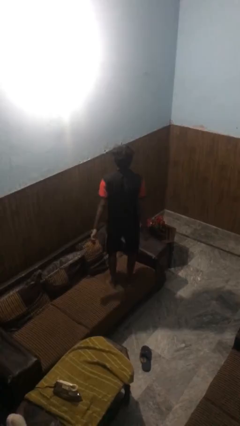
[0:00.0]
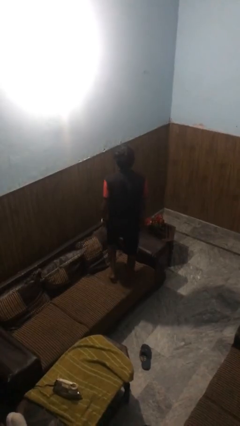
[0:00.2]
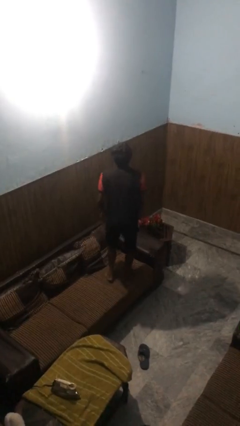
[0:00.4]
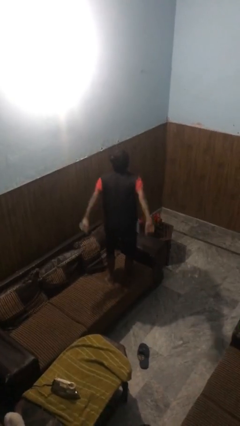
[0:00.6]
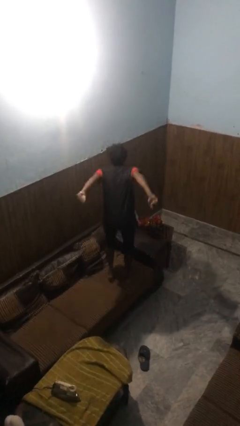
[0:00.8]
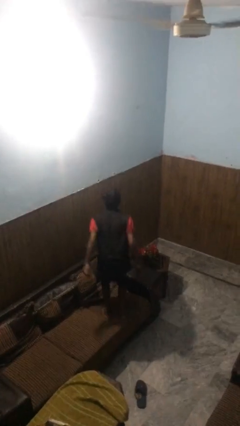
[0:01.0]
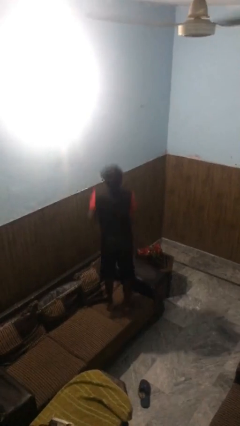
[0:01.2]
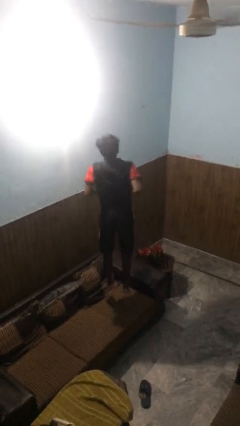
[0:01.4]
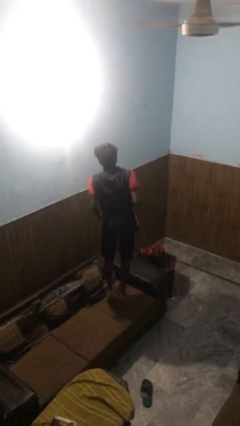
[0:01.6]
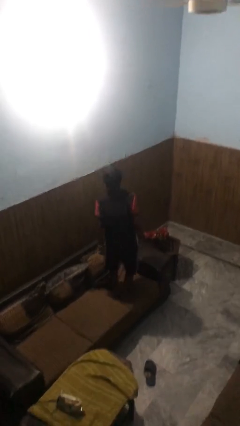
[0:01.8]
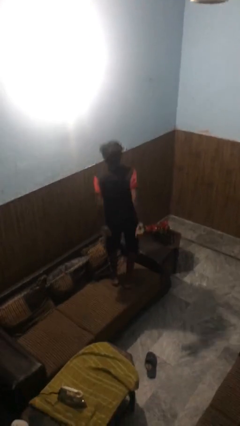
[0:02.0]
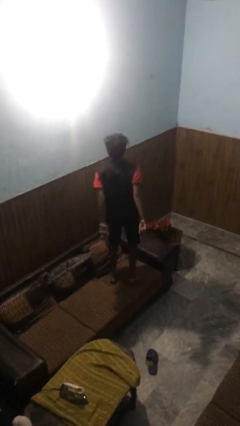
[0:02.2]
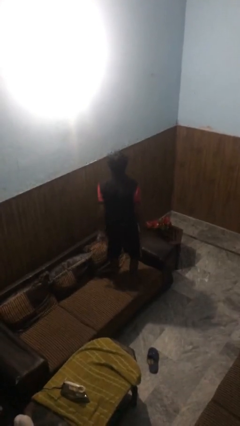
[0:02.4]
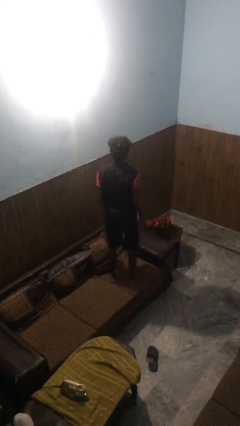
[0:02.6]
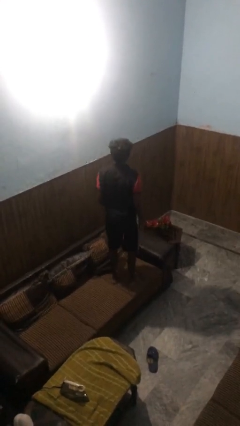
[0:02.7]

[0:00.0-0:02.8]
person jumps on couch

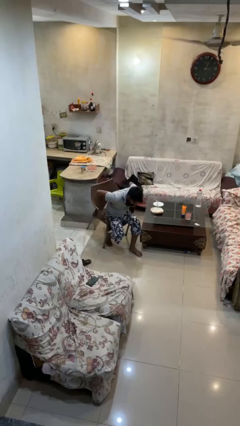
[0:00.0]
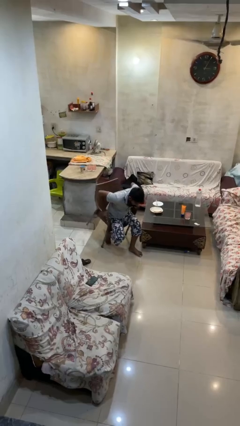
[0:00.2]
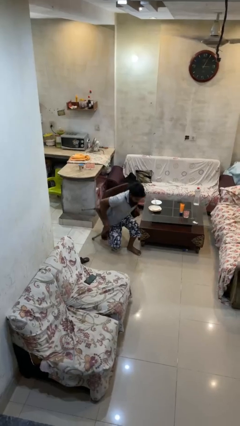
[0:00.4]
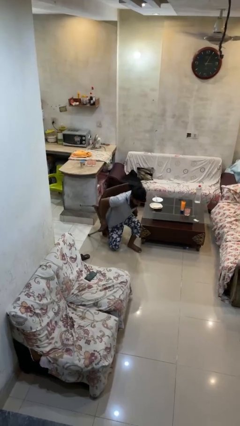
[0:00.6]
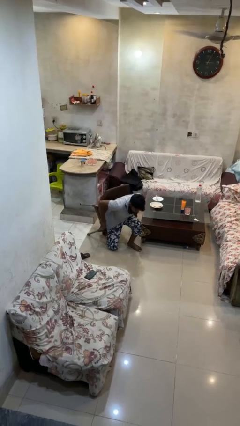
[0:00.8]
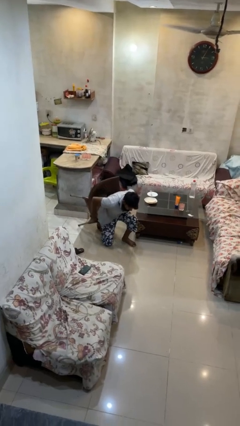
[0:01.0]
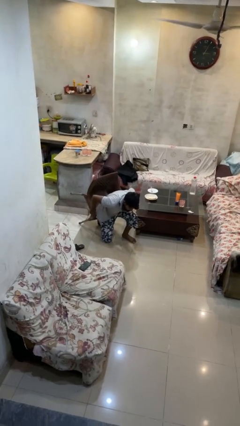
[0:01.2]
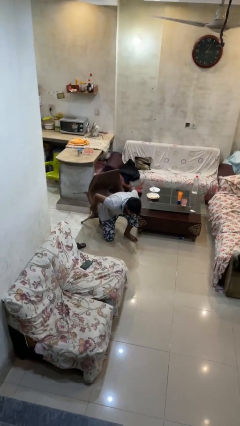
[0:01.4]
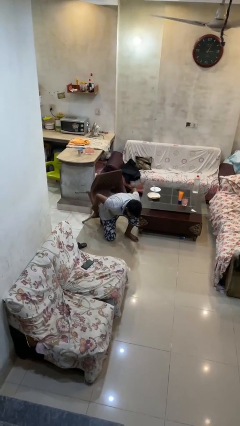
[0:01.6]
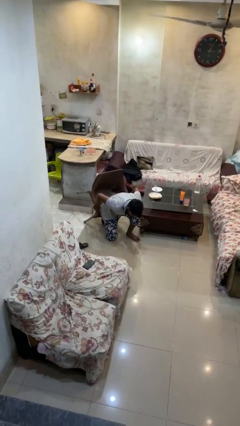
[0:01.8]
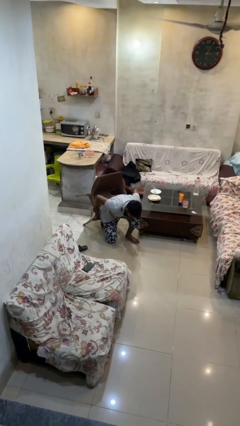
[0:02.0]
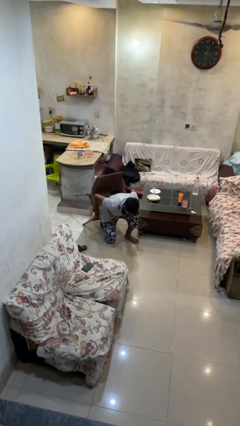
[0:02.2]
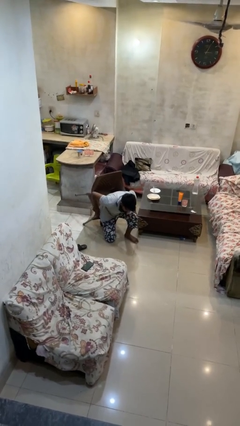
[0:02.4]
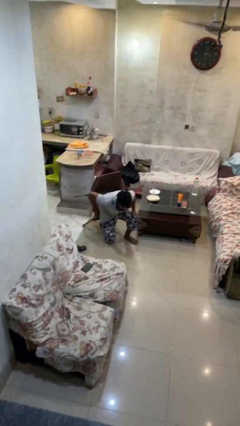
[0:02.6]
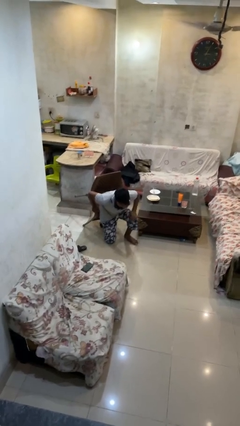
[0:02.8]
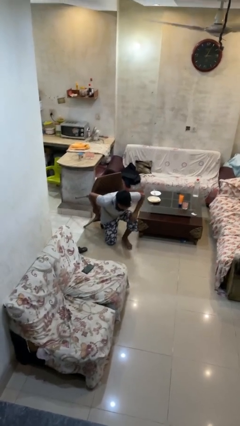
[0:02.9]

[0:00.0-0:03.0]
person falls from chair

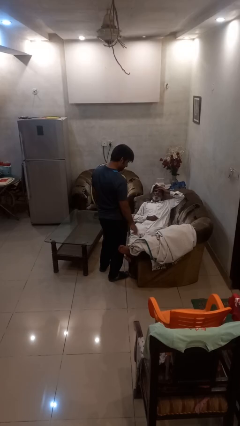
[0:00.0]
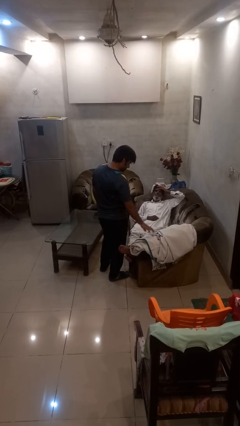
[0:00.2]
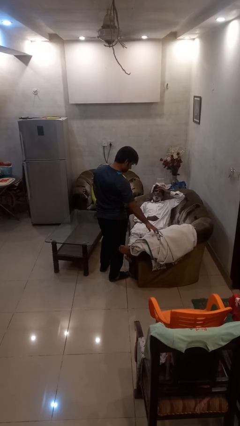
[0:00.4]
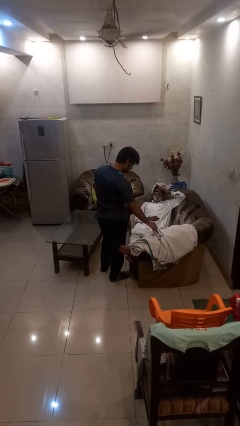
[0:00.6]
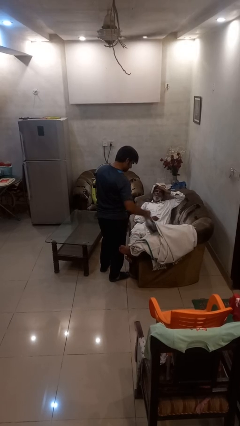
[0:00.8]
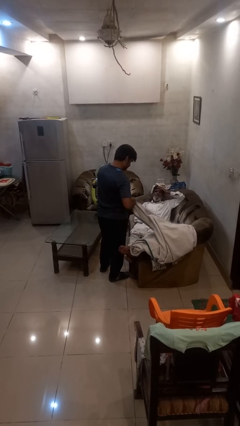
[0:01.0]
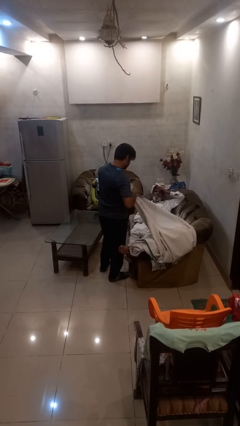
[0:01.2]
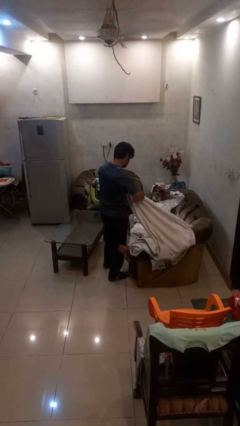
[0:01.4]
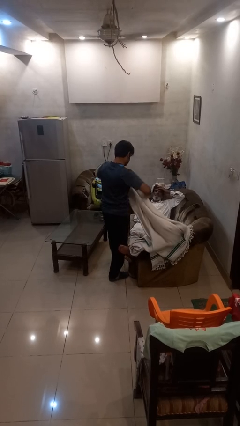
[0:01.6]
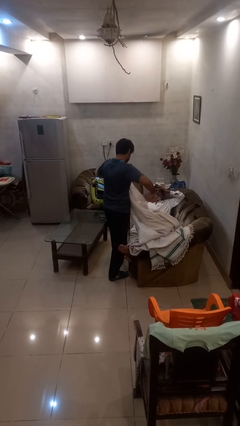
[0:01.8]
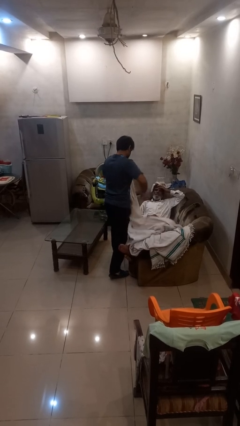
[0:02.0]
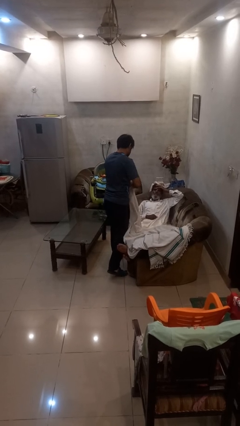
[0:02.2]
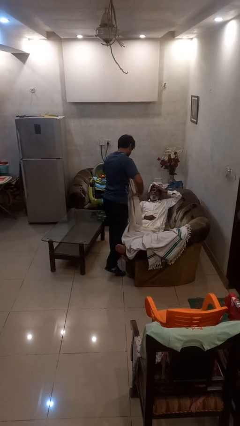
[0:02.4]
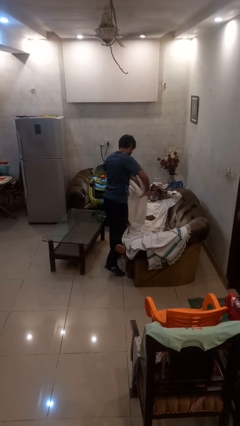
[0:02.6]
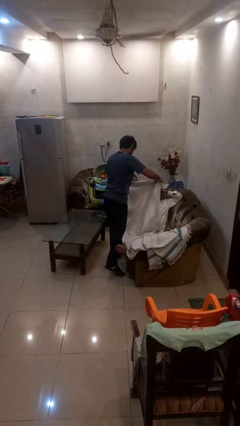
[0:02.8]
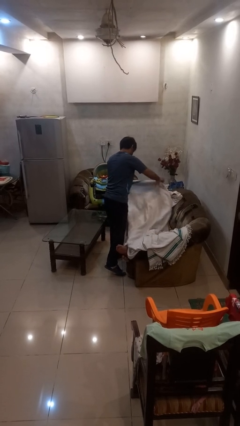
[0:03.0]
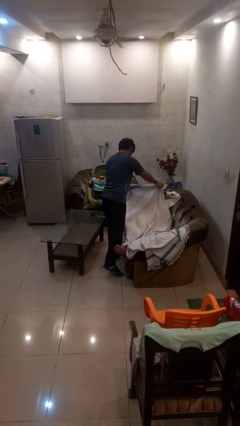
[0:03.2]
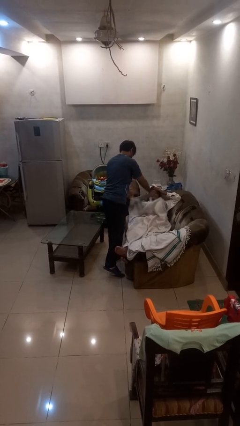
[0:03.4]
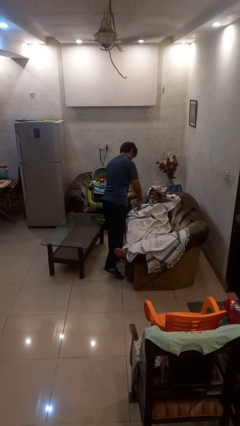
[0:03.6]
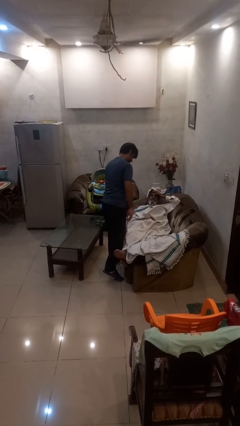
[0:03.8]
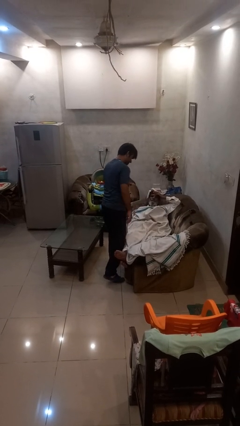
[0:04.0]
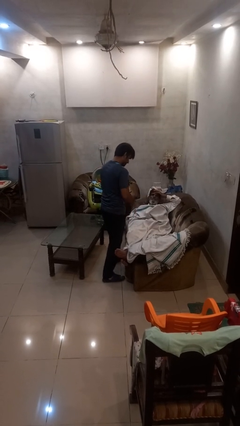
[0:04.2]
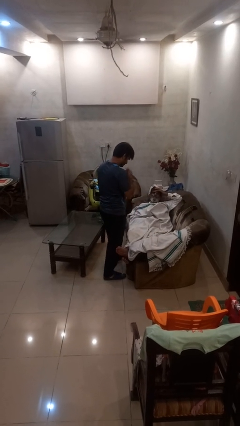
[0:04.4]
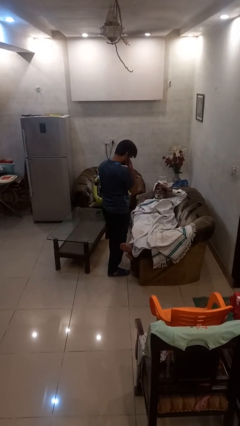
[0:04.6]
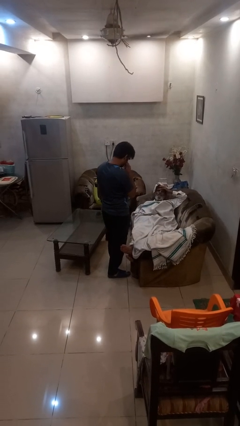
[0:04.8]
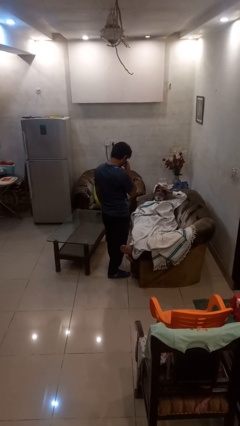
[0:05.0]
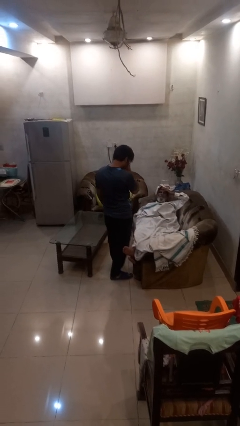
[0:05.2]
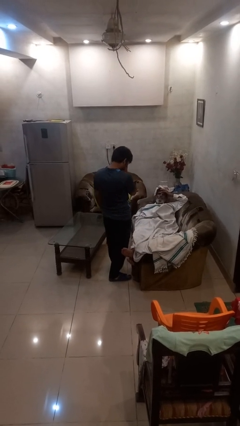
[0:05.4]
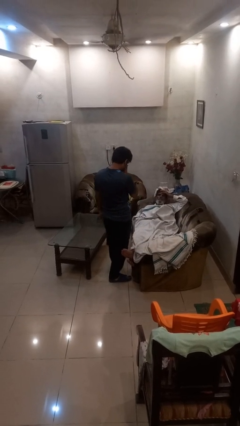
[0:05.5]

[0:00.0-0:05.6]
person covers friend with blanket

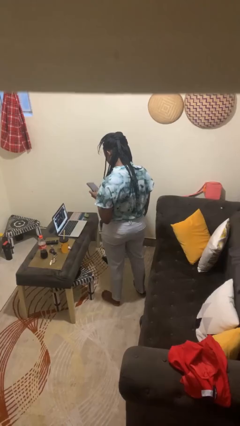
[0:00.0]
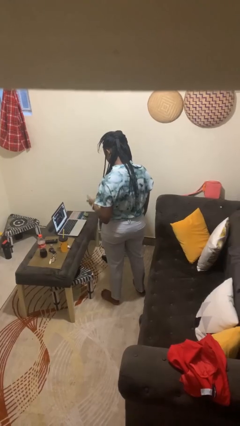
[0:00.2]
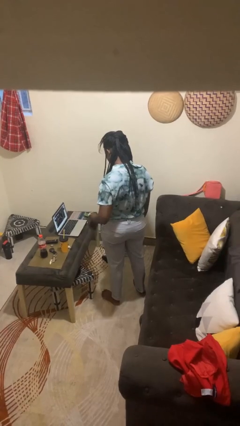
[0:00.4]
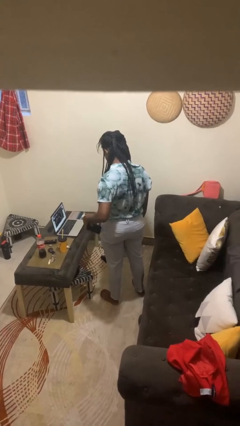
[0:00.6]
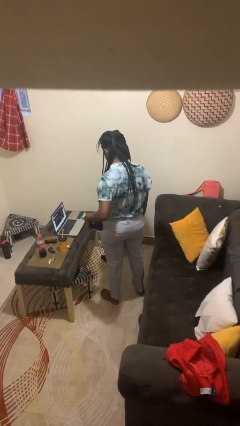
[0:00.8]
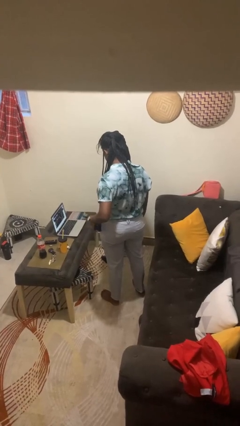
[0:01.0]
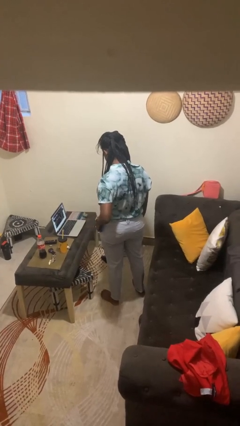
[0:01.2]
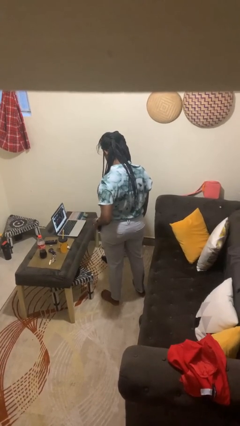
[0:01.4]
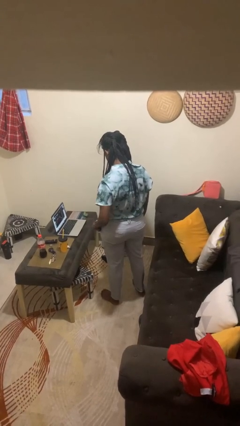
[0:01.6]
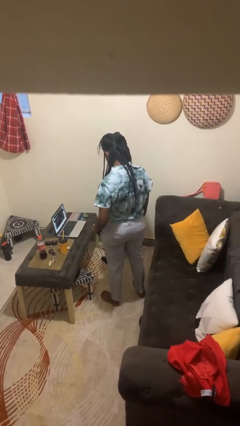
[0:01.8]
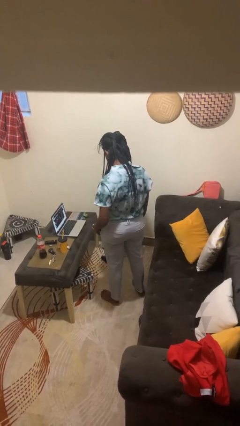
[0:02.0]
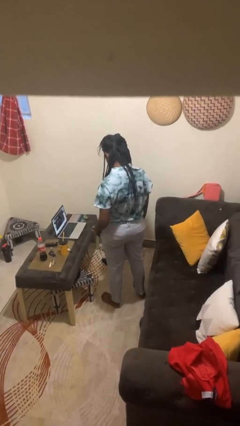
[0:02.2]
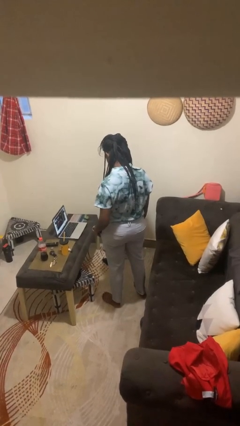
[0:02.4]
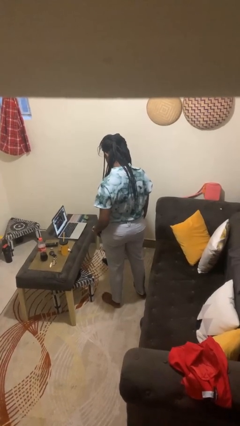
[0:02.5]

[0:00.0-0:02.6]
person puts phone into pocket

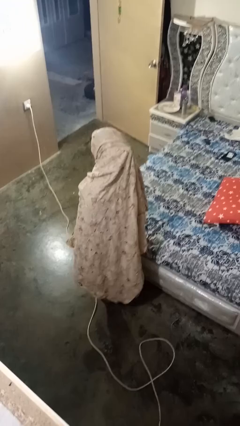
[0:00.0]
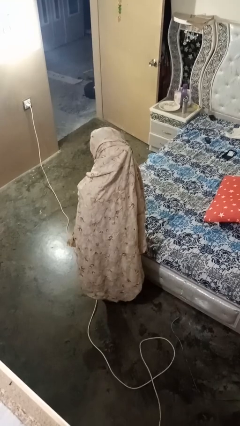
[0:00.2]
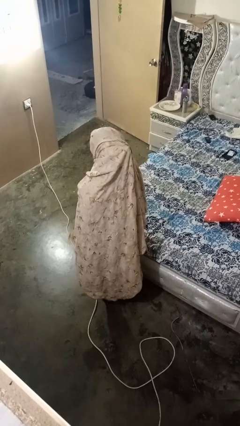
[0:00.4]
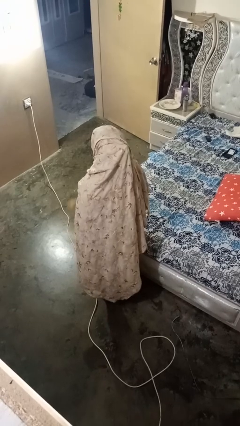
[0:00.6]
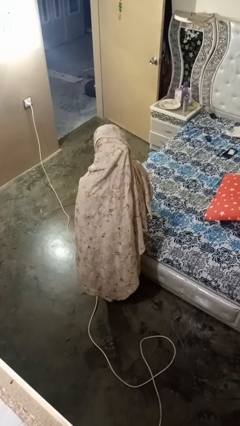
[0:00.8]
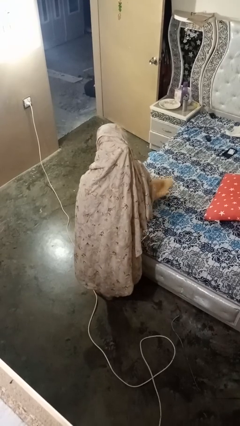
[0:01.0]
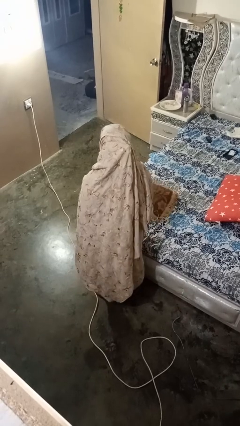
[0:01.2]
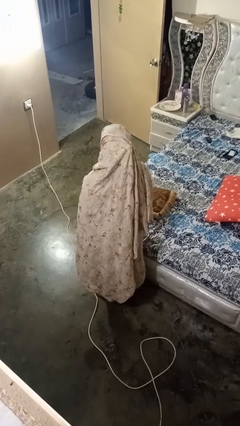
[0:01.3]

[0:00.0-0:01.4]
person puts down object on bed

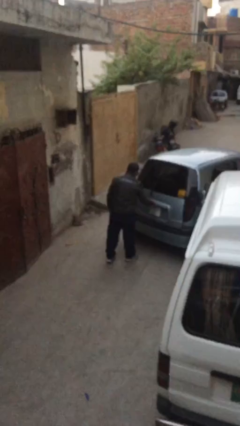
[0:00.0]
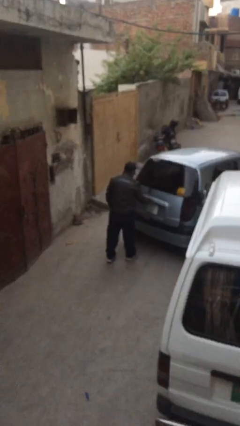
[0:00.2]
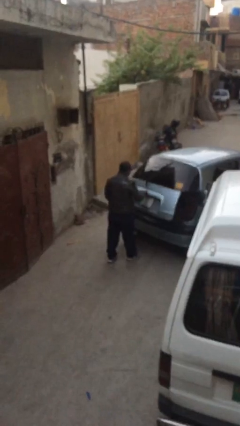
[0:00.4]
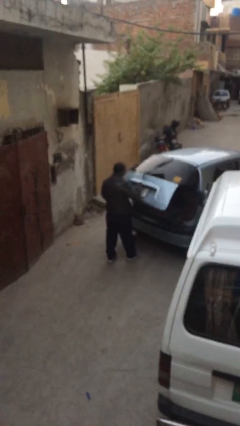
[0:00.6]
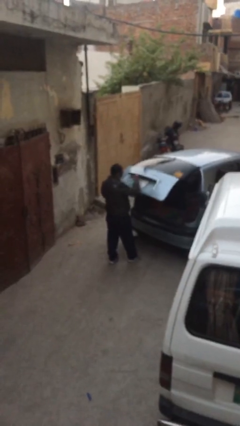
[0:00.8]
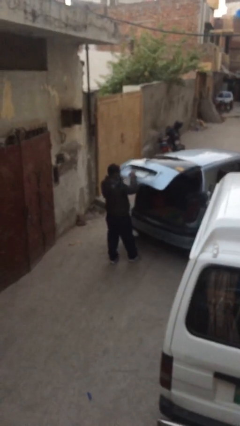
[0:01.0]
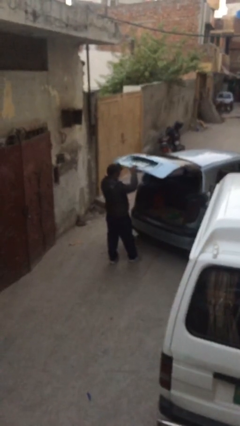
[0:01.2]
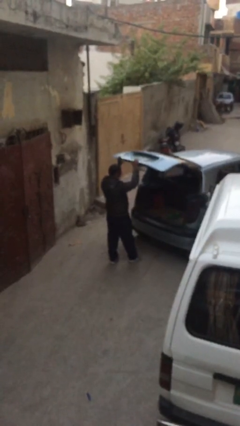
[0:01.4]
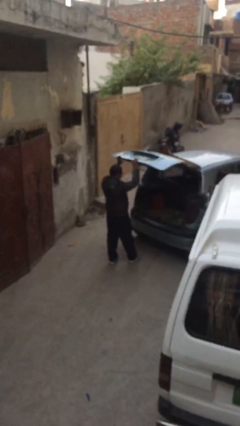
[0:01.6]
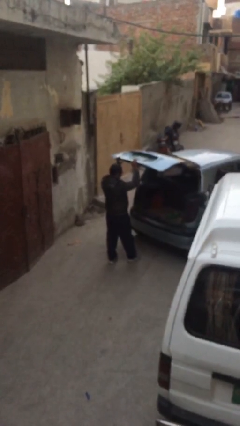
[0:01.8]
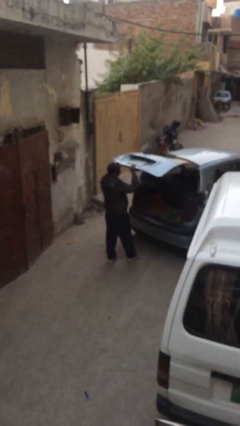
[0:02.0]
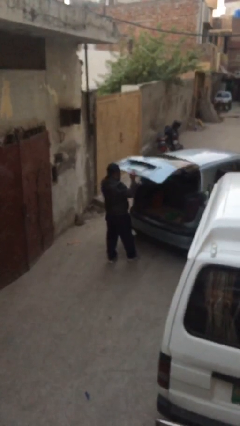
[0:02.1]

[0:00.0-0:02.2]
person opens car trunk

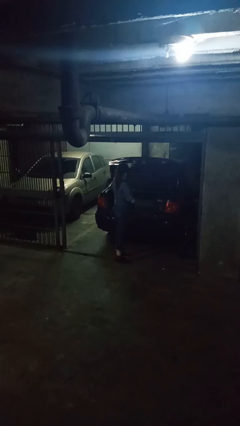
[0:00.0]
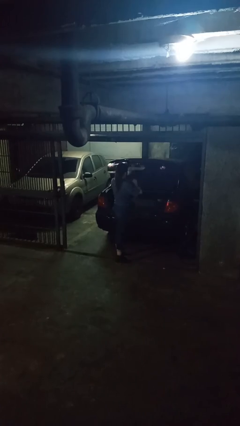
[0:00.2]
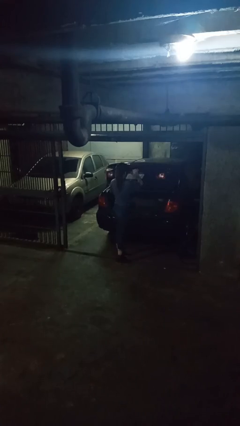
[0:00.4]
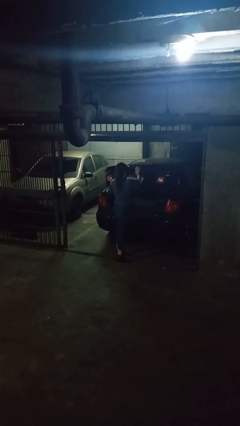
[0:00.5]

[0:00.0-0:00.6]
person closes car trunk
